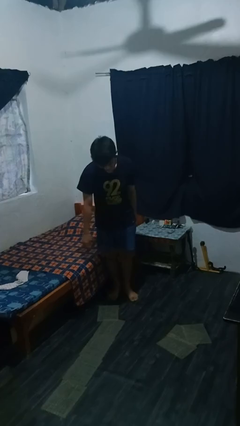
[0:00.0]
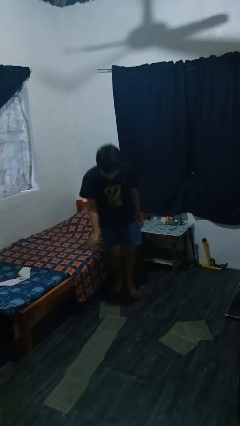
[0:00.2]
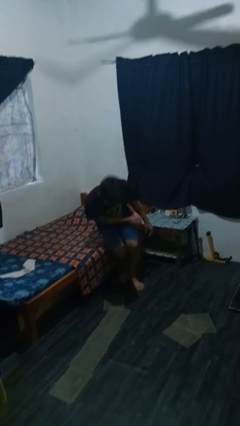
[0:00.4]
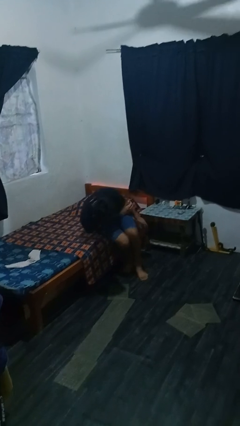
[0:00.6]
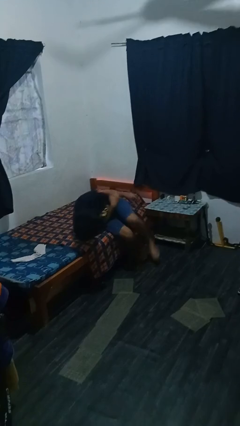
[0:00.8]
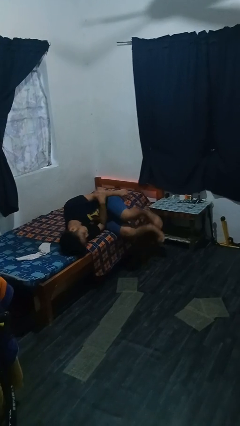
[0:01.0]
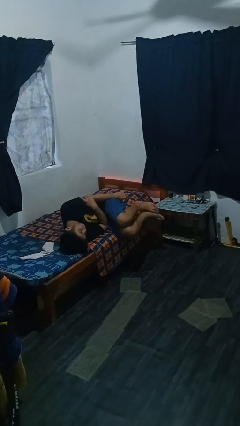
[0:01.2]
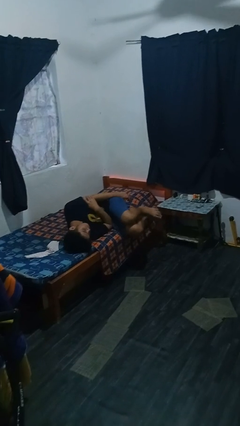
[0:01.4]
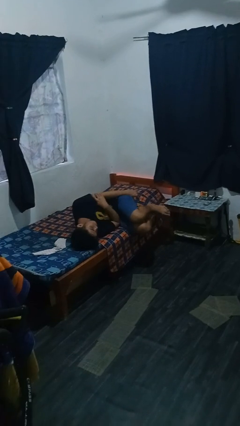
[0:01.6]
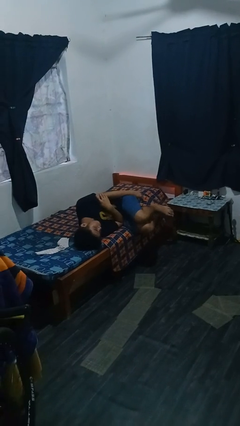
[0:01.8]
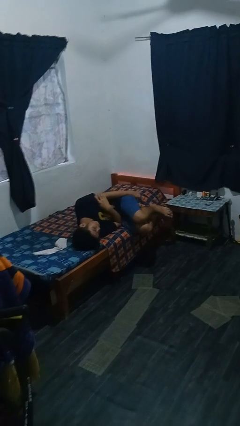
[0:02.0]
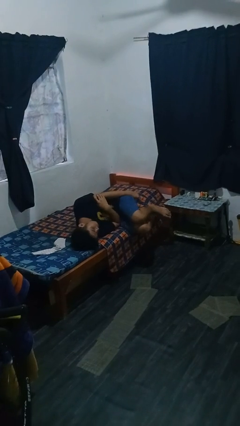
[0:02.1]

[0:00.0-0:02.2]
person lies down on bed

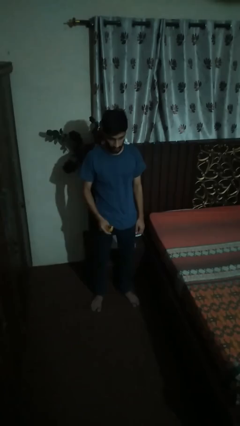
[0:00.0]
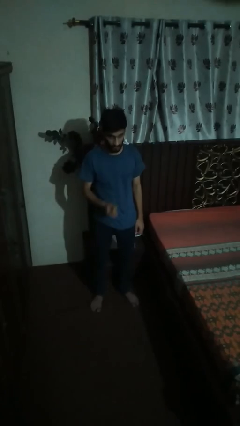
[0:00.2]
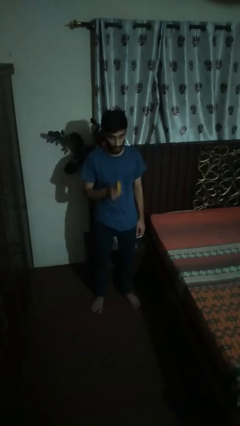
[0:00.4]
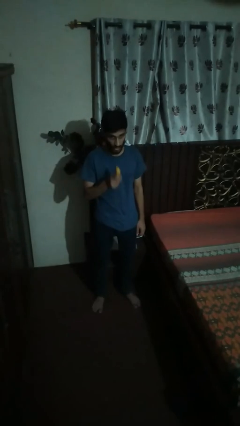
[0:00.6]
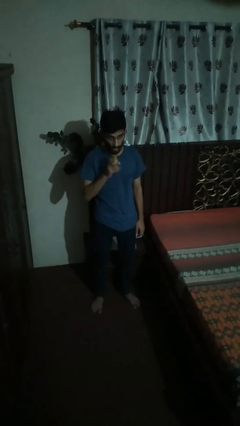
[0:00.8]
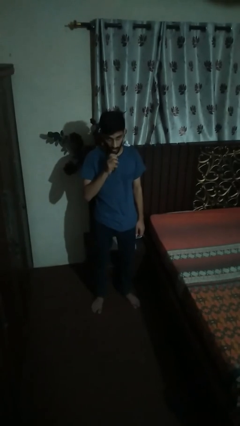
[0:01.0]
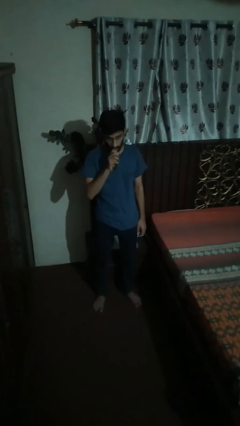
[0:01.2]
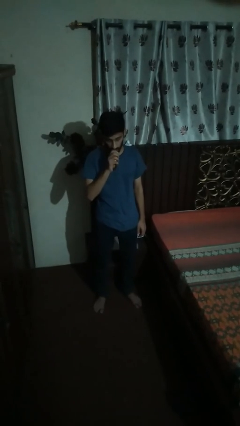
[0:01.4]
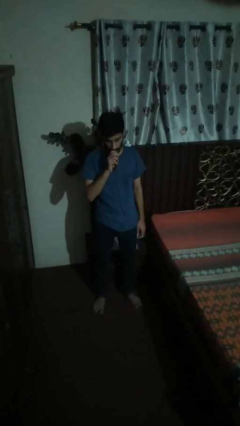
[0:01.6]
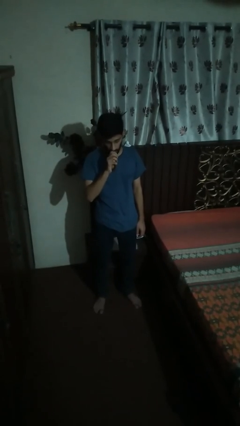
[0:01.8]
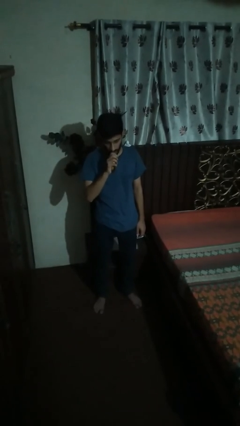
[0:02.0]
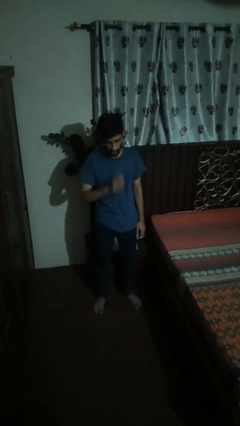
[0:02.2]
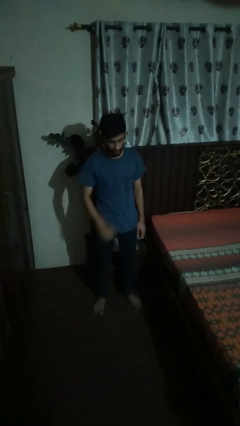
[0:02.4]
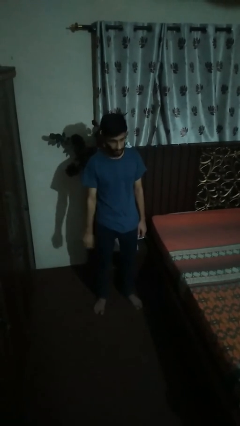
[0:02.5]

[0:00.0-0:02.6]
person eats banana

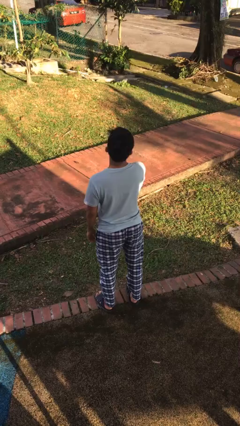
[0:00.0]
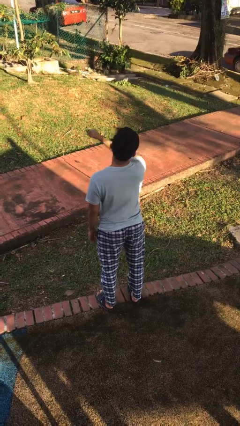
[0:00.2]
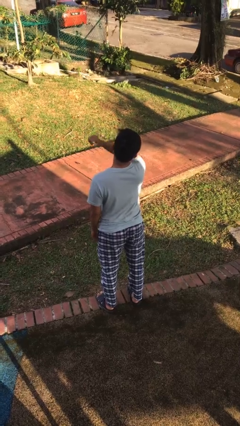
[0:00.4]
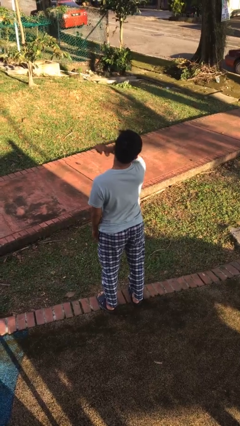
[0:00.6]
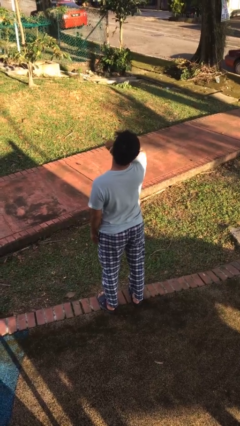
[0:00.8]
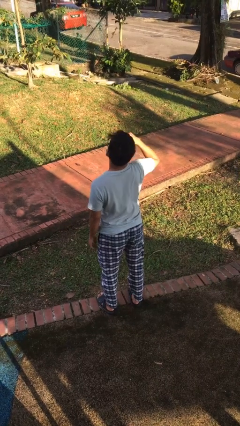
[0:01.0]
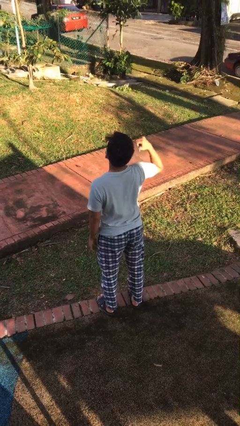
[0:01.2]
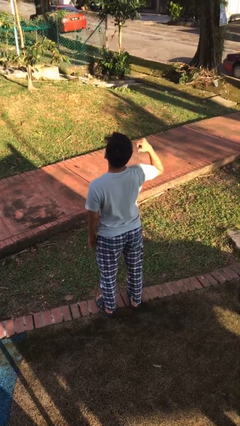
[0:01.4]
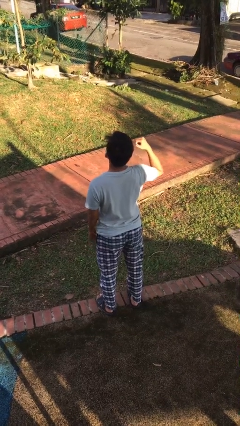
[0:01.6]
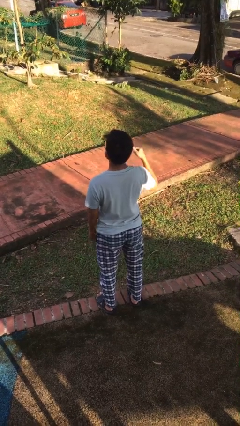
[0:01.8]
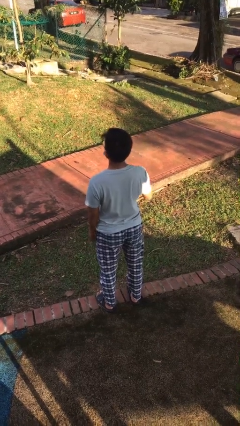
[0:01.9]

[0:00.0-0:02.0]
person gestures cut

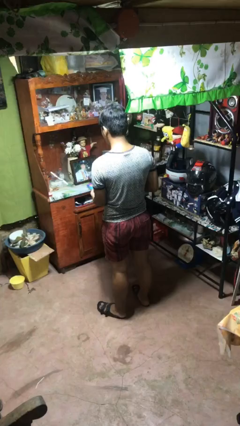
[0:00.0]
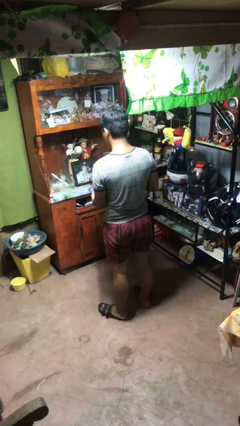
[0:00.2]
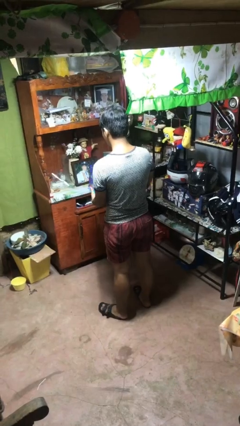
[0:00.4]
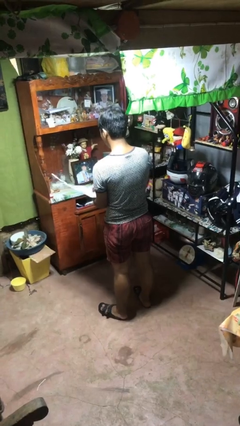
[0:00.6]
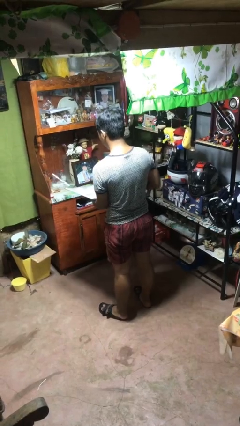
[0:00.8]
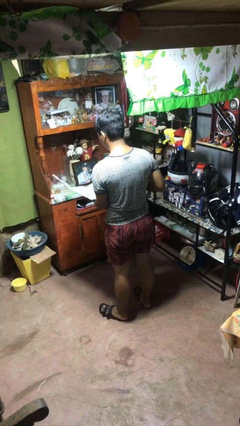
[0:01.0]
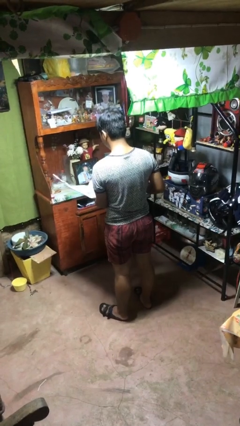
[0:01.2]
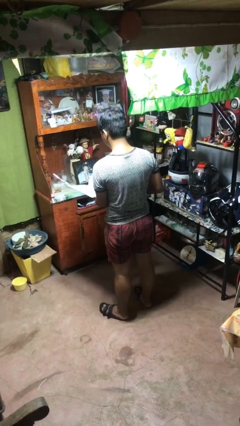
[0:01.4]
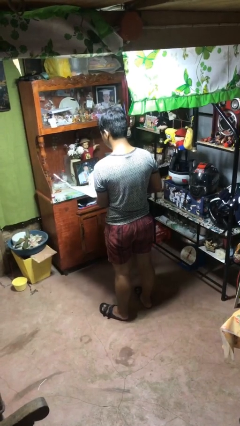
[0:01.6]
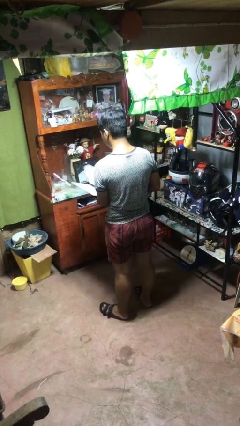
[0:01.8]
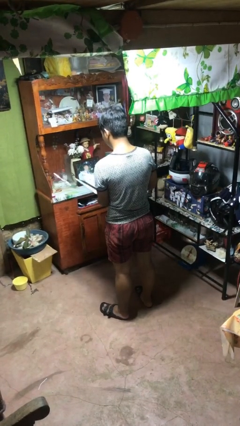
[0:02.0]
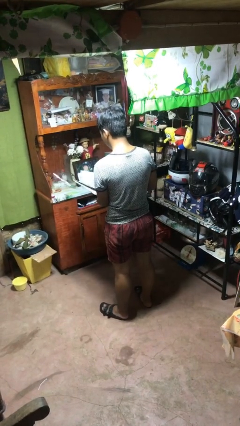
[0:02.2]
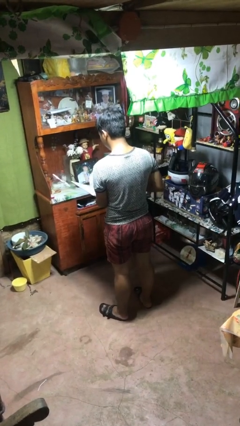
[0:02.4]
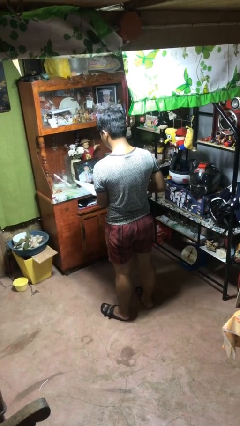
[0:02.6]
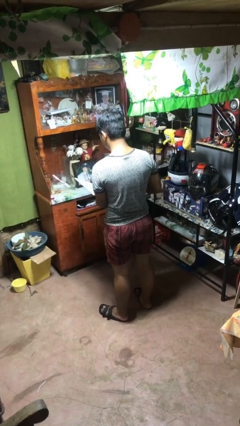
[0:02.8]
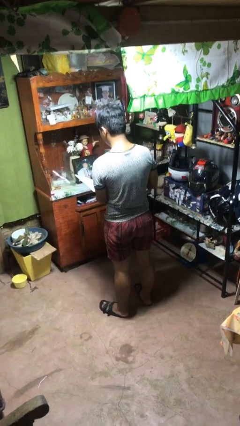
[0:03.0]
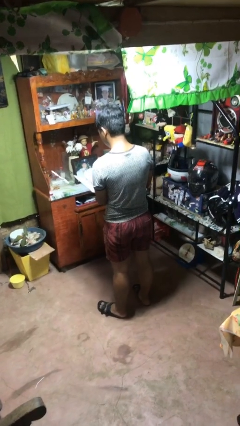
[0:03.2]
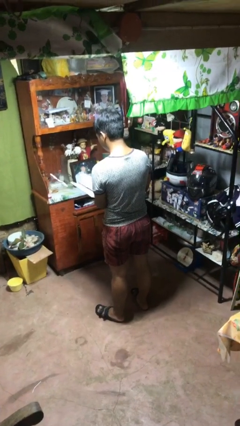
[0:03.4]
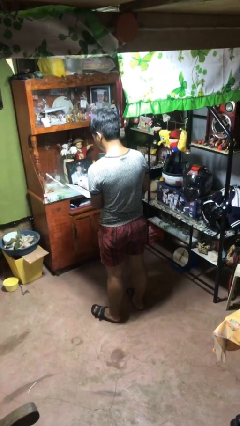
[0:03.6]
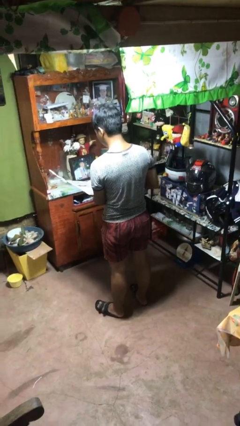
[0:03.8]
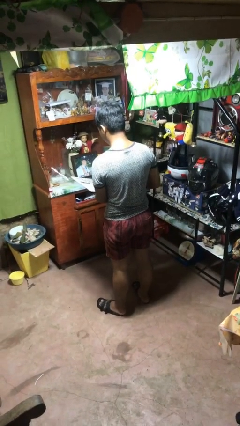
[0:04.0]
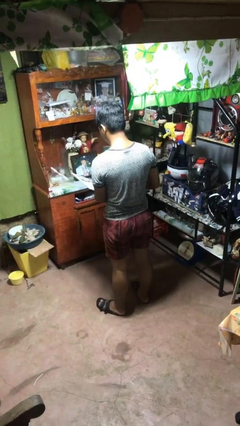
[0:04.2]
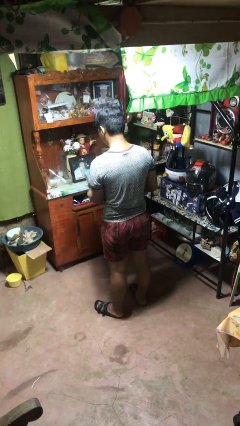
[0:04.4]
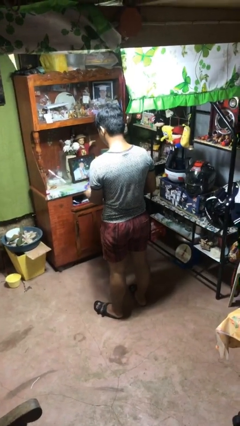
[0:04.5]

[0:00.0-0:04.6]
person reads magazine

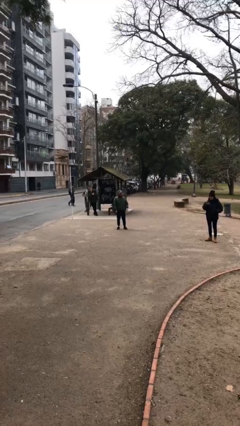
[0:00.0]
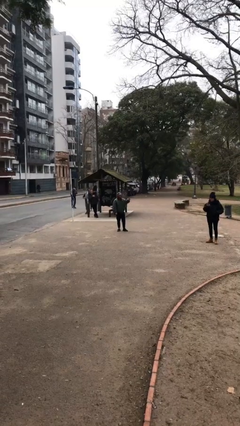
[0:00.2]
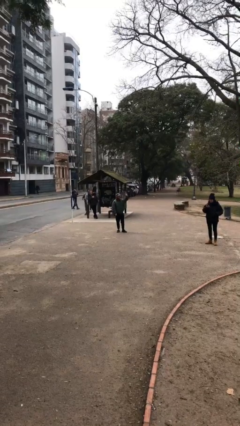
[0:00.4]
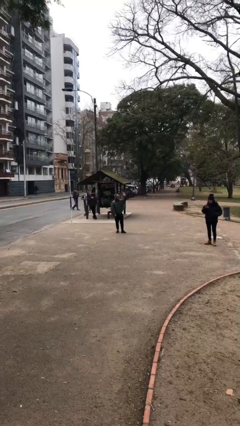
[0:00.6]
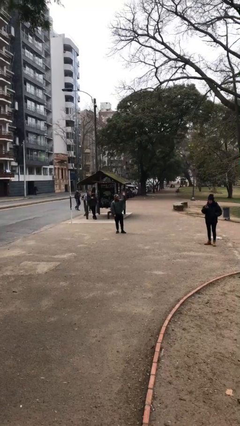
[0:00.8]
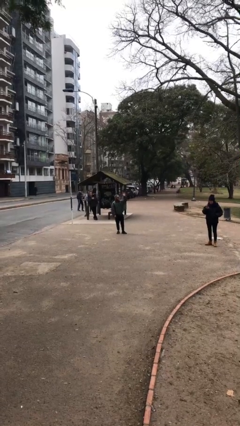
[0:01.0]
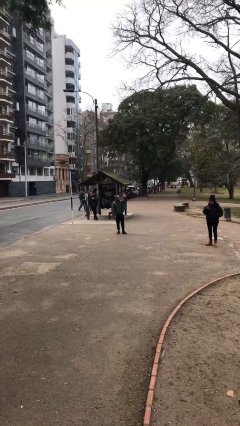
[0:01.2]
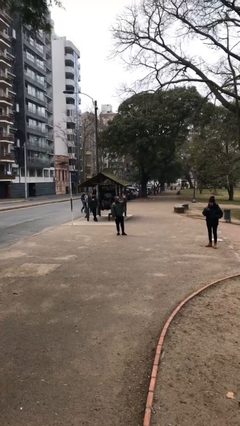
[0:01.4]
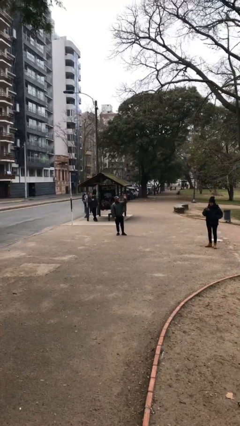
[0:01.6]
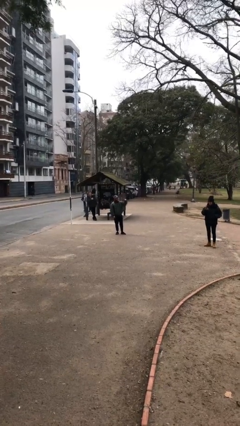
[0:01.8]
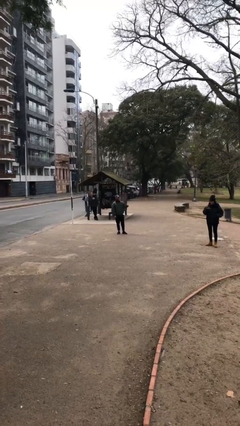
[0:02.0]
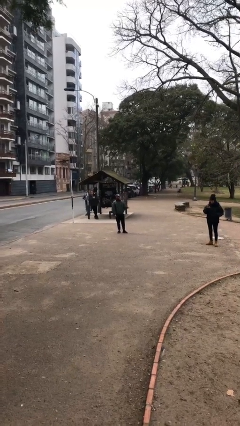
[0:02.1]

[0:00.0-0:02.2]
person waves at person

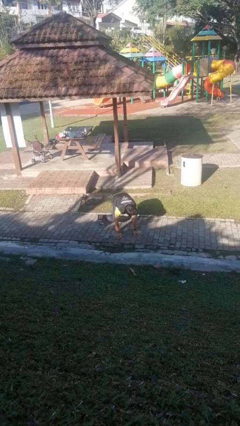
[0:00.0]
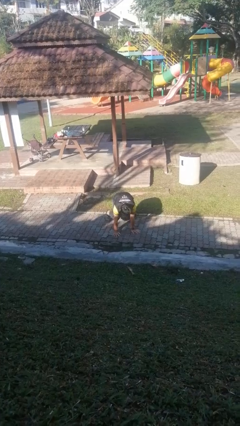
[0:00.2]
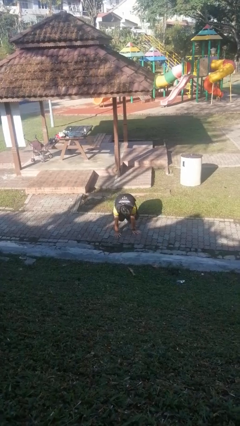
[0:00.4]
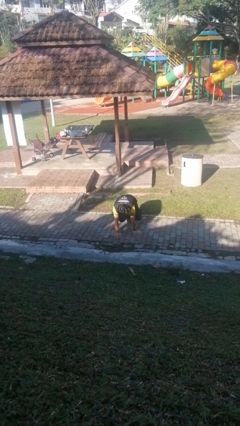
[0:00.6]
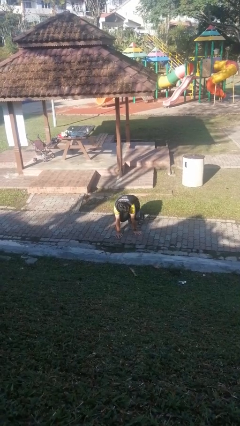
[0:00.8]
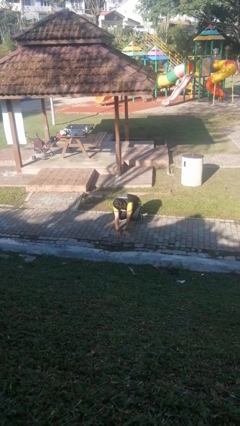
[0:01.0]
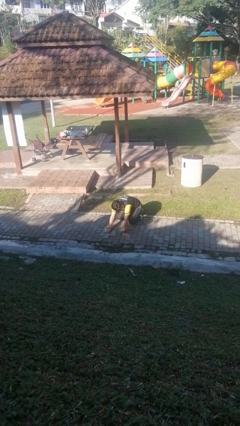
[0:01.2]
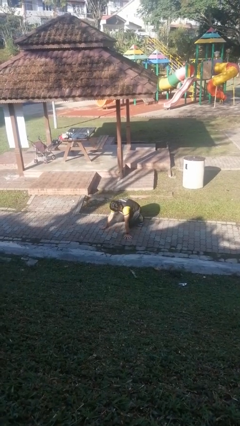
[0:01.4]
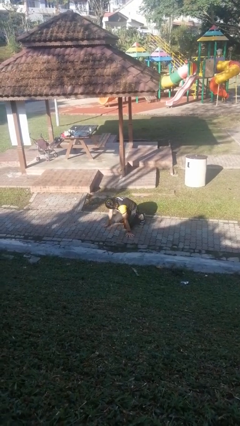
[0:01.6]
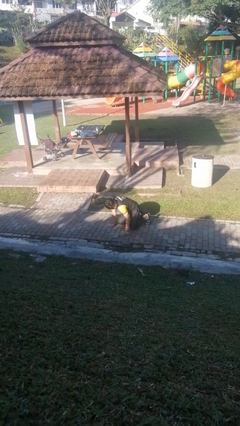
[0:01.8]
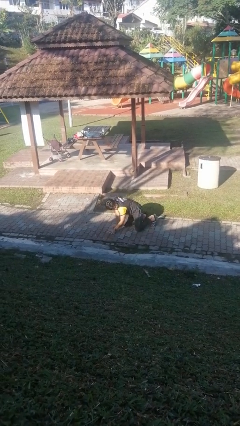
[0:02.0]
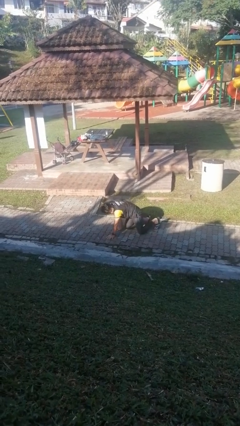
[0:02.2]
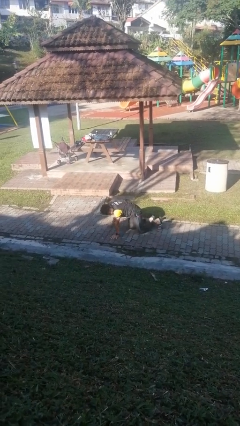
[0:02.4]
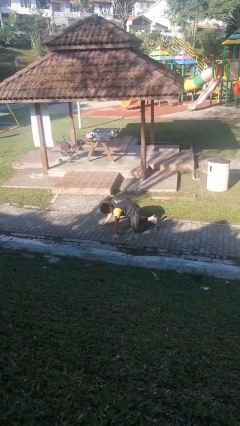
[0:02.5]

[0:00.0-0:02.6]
person crawls

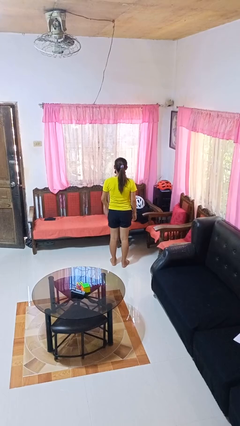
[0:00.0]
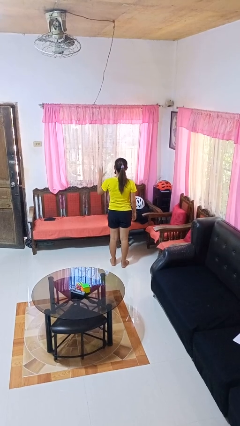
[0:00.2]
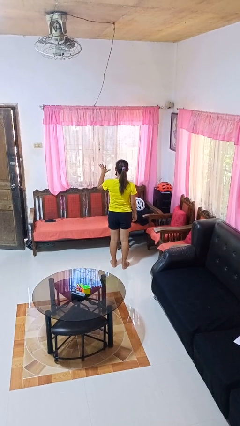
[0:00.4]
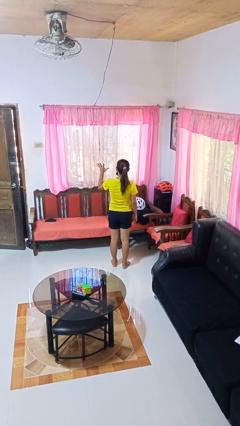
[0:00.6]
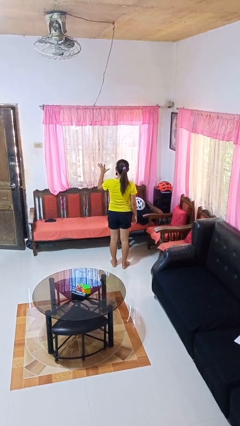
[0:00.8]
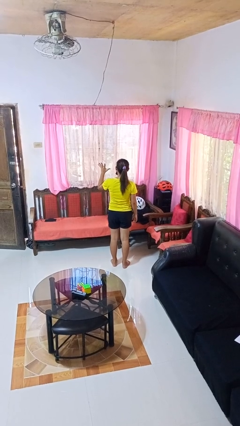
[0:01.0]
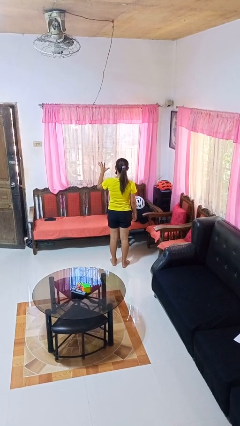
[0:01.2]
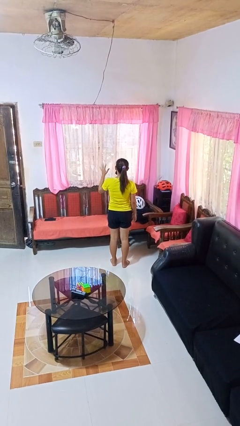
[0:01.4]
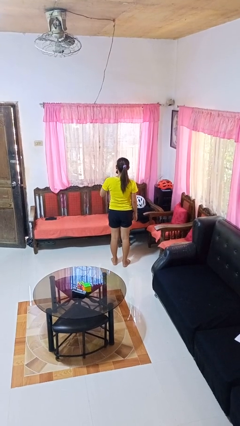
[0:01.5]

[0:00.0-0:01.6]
person gestures number five
